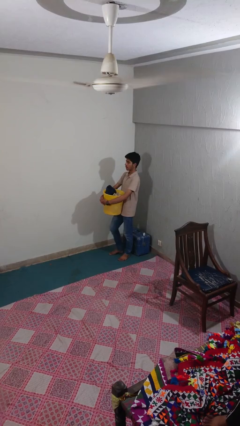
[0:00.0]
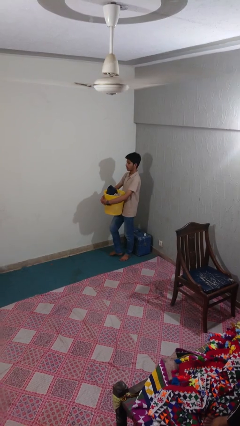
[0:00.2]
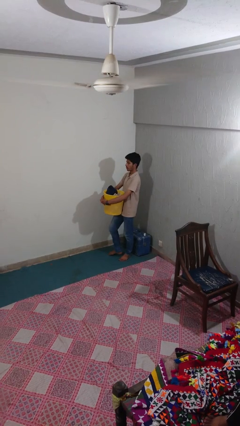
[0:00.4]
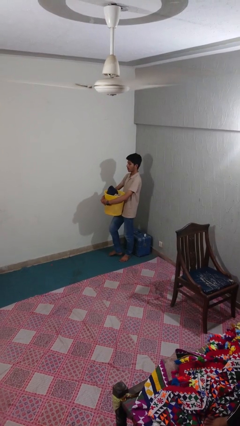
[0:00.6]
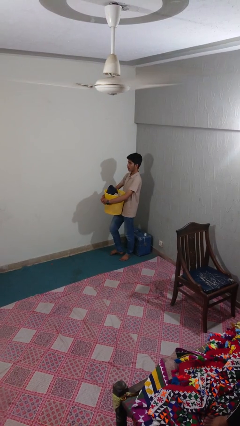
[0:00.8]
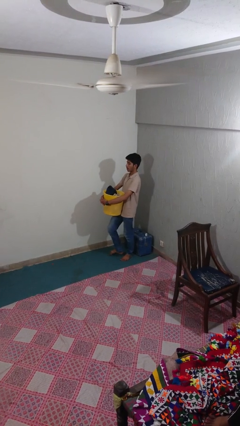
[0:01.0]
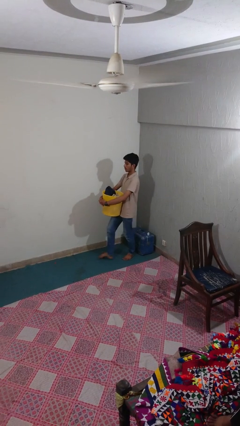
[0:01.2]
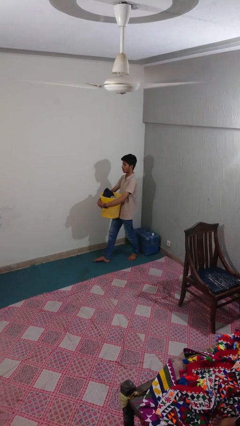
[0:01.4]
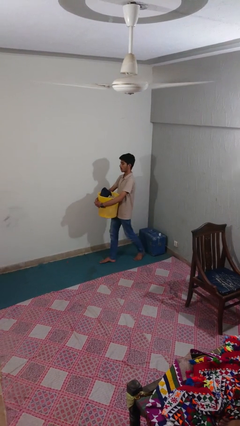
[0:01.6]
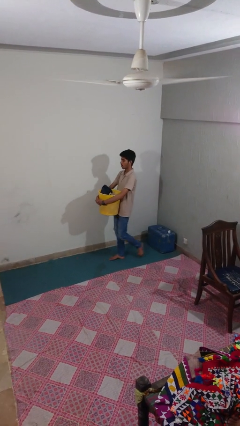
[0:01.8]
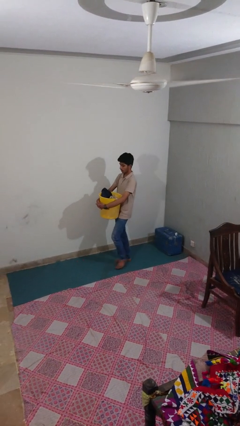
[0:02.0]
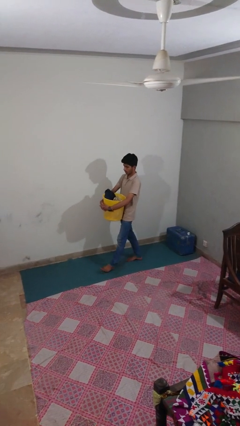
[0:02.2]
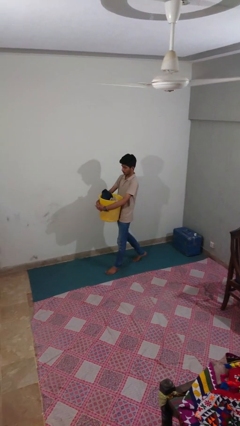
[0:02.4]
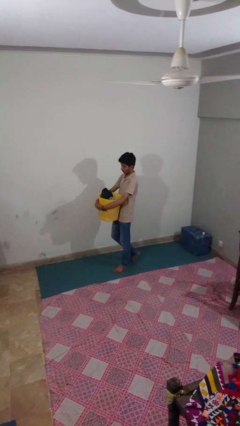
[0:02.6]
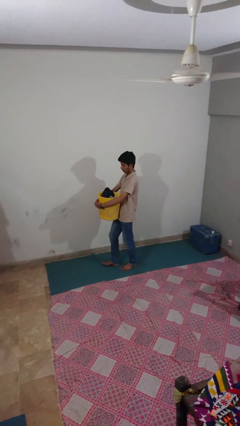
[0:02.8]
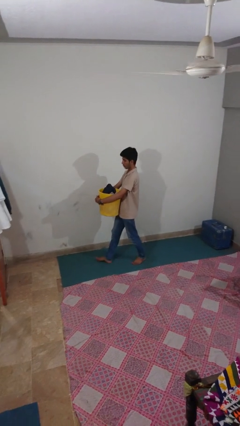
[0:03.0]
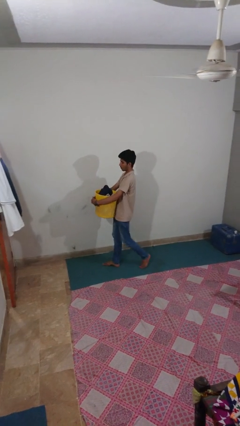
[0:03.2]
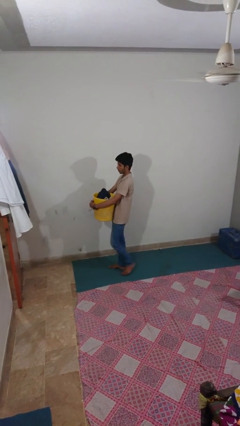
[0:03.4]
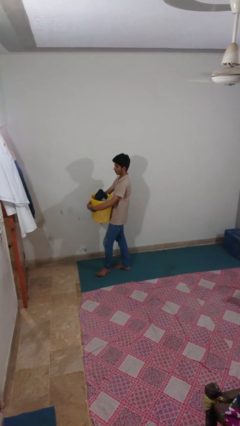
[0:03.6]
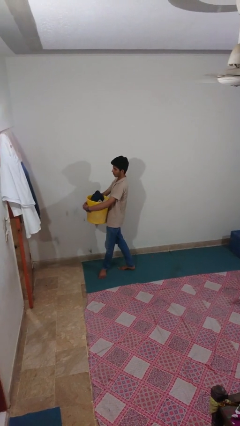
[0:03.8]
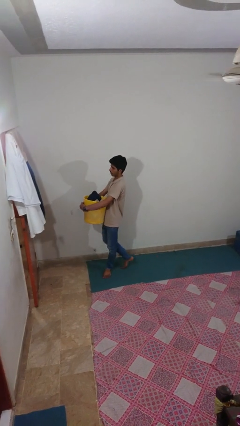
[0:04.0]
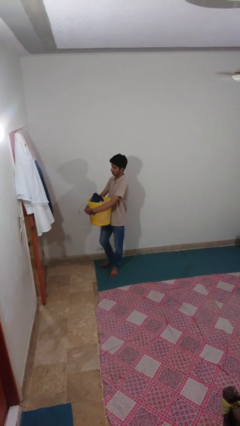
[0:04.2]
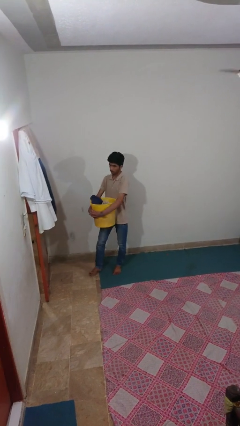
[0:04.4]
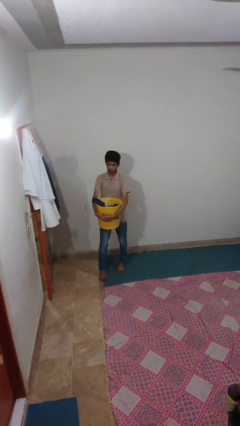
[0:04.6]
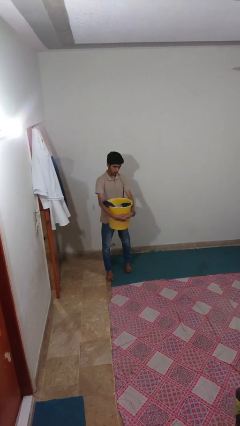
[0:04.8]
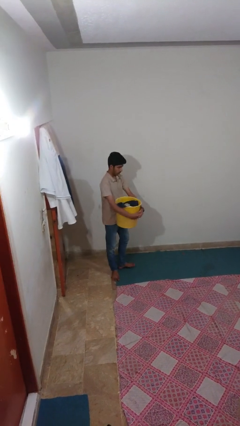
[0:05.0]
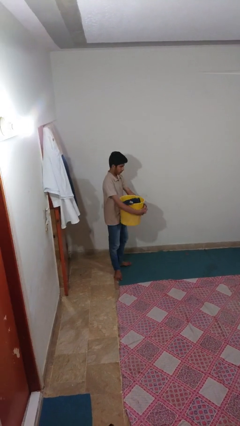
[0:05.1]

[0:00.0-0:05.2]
person carries laundry basket

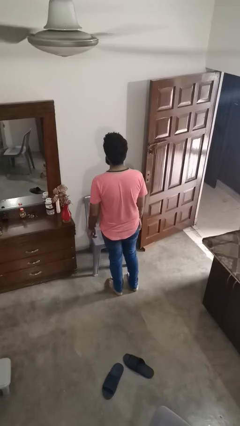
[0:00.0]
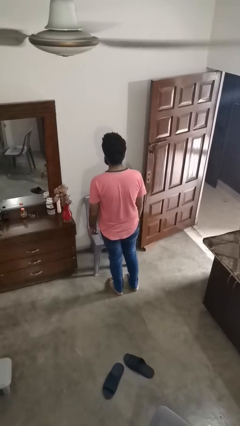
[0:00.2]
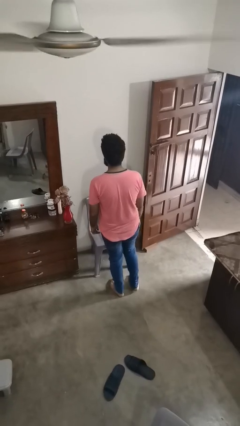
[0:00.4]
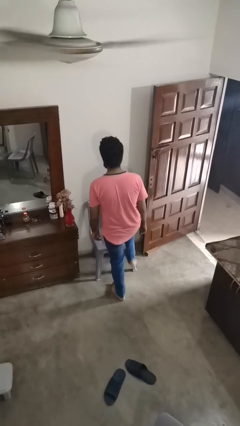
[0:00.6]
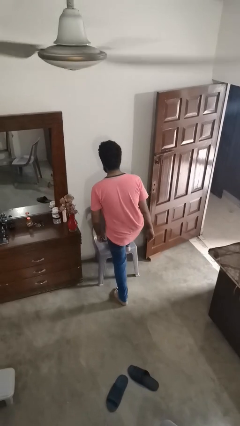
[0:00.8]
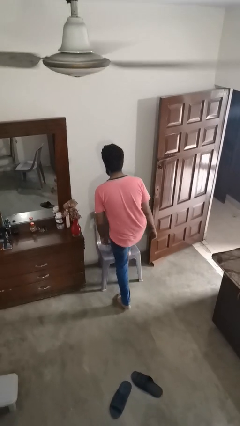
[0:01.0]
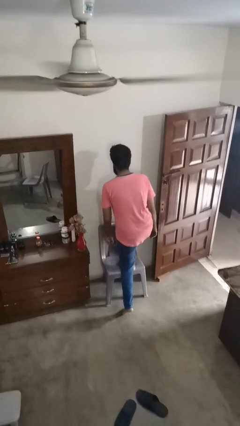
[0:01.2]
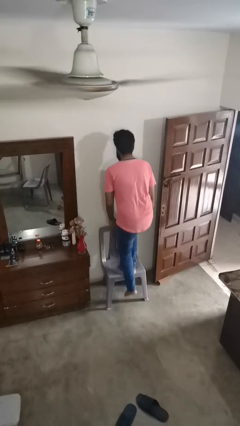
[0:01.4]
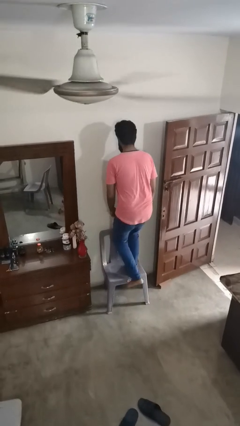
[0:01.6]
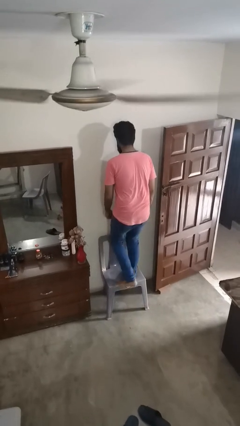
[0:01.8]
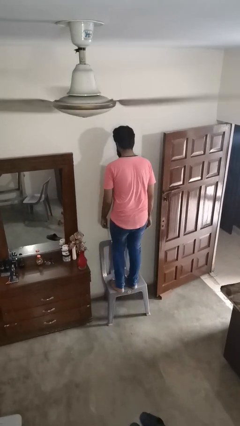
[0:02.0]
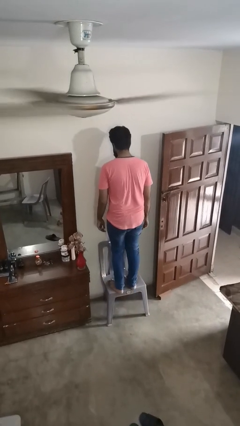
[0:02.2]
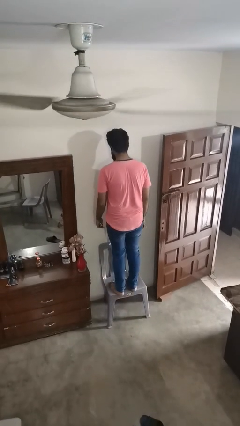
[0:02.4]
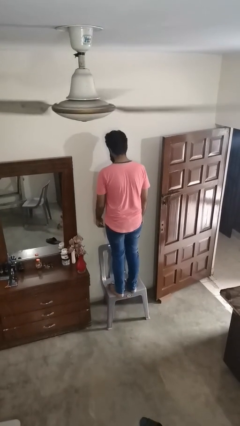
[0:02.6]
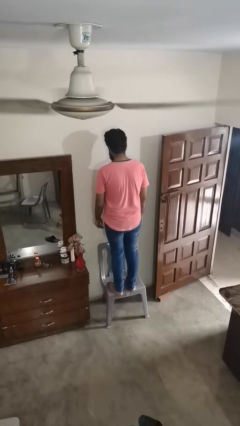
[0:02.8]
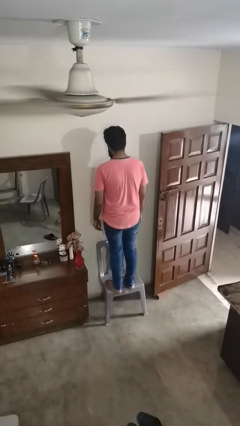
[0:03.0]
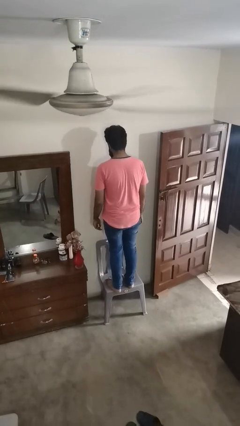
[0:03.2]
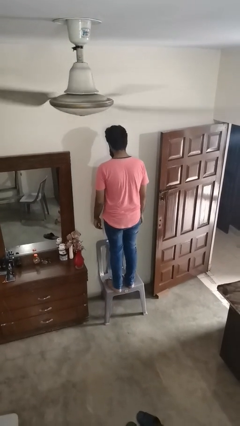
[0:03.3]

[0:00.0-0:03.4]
person climbs on chair

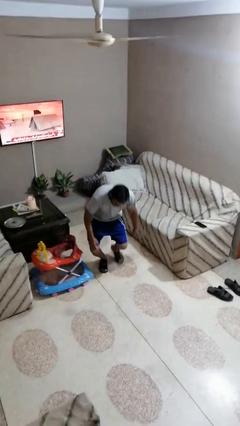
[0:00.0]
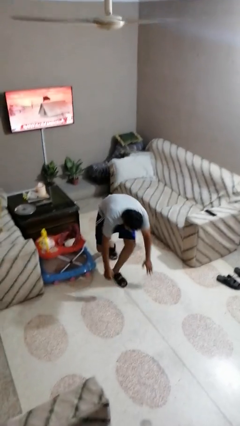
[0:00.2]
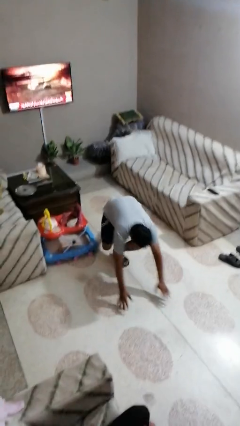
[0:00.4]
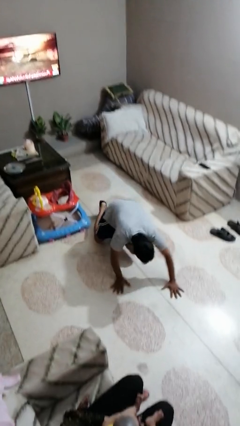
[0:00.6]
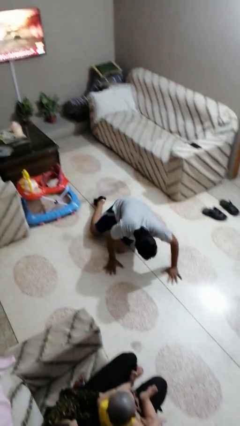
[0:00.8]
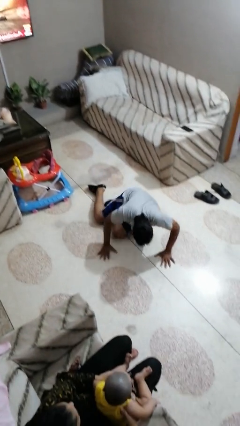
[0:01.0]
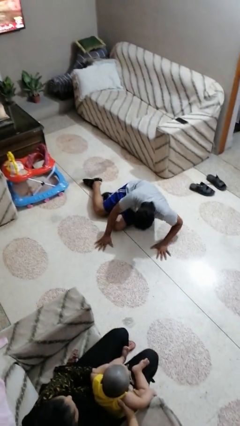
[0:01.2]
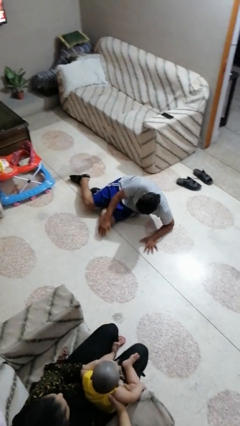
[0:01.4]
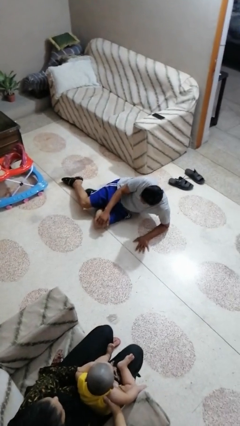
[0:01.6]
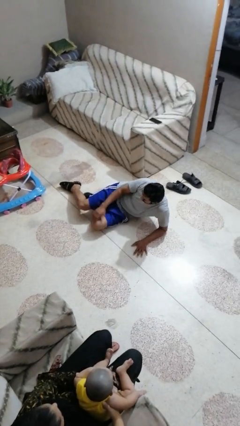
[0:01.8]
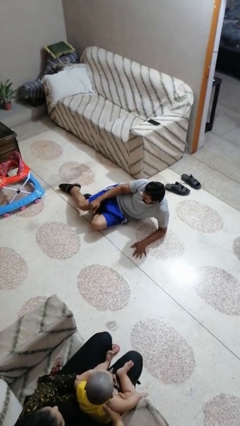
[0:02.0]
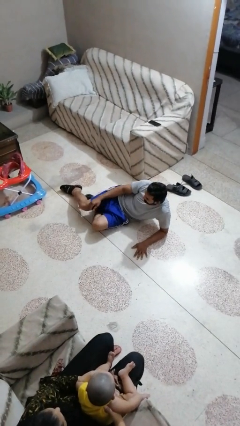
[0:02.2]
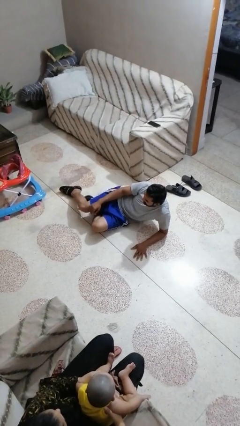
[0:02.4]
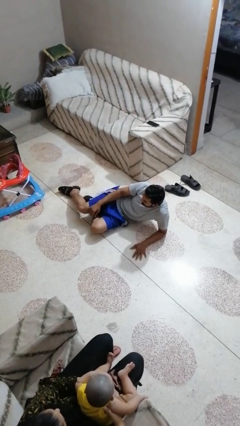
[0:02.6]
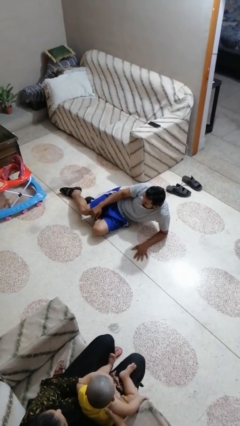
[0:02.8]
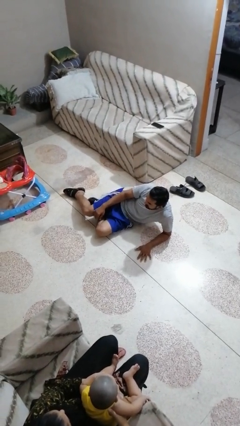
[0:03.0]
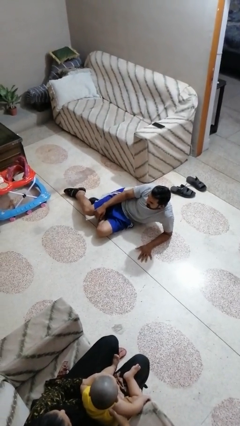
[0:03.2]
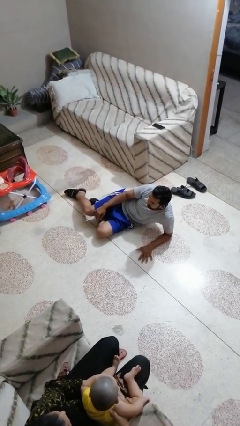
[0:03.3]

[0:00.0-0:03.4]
person lies down on floor

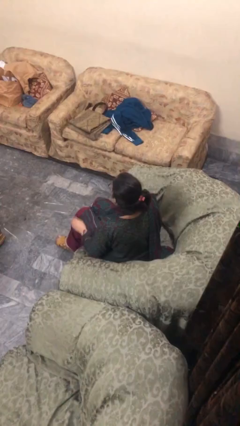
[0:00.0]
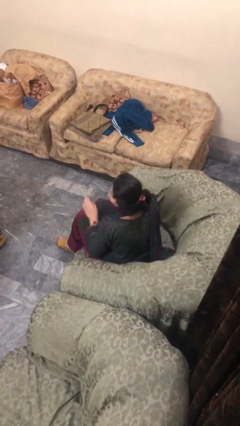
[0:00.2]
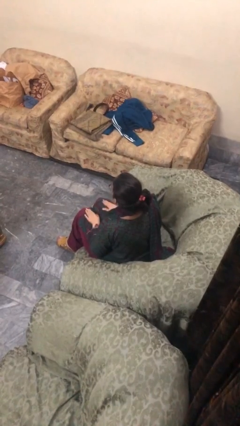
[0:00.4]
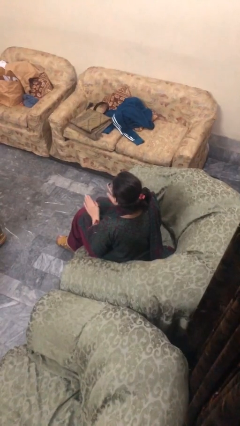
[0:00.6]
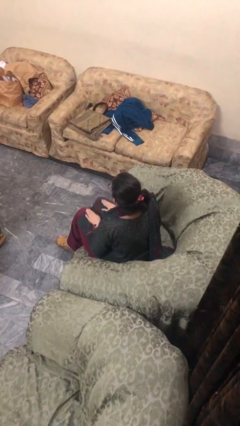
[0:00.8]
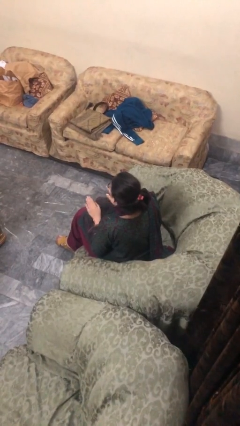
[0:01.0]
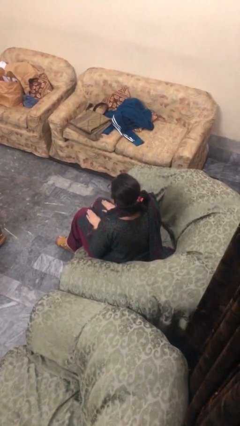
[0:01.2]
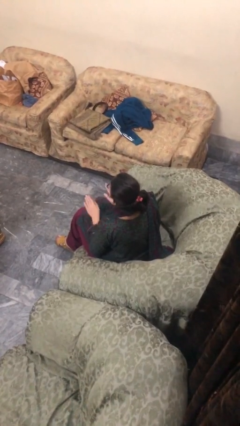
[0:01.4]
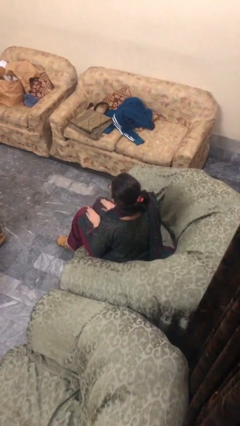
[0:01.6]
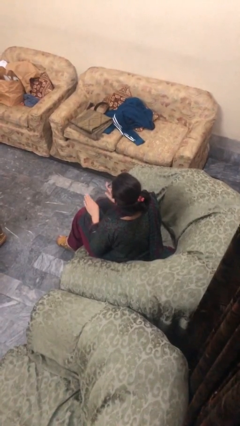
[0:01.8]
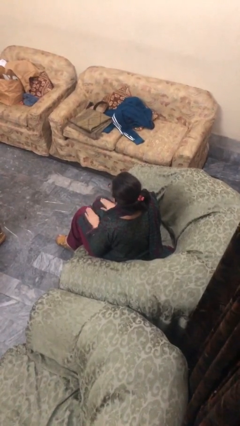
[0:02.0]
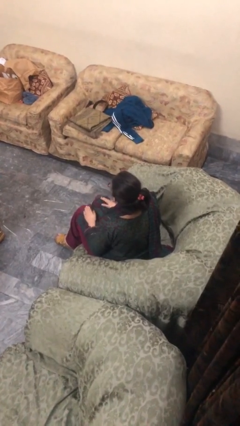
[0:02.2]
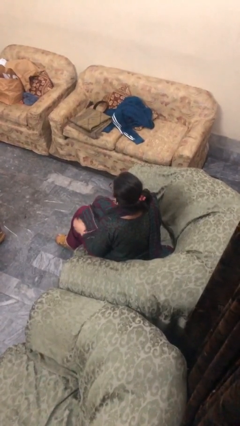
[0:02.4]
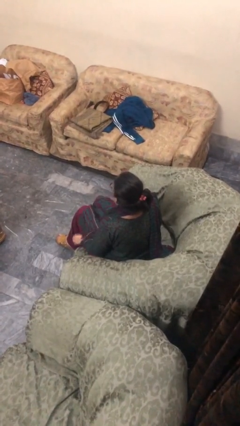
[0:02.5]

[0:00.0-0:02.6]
person slaps hands on thighs

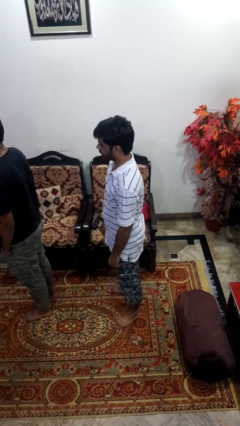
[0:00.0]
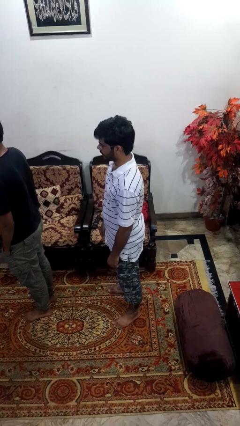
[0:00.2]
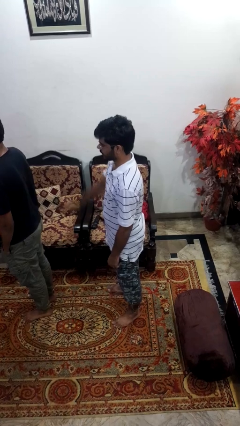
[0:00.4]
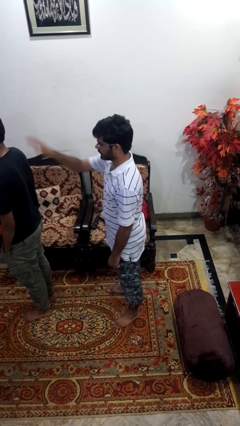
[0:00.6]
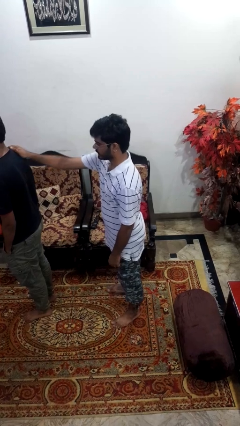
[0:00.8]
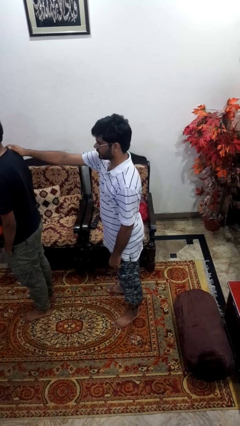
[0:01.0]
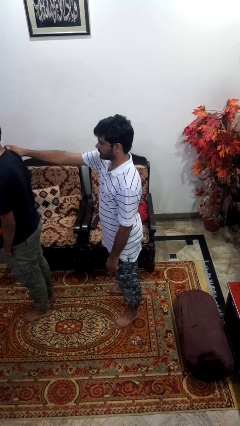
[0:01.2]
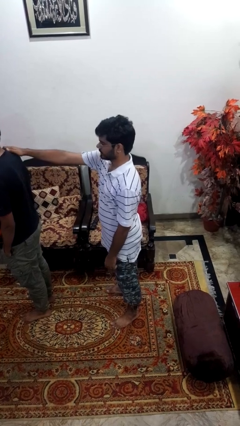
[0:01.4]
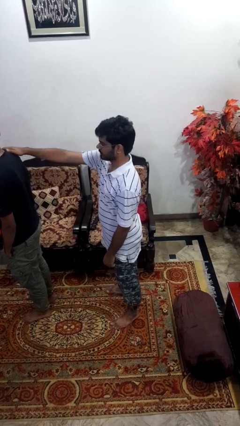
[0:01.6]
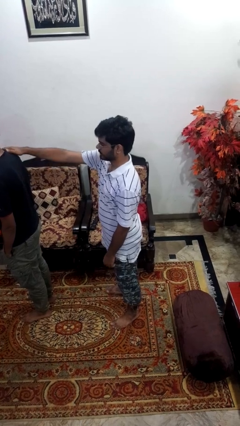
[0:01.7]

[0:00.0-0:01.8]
person grabs person by shoulder

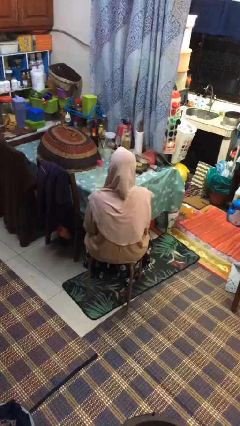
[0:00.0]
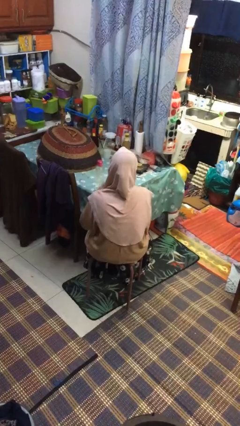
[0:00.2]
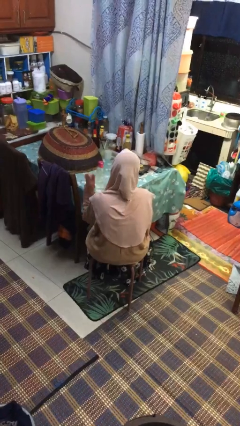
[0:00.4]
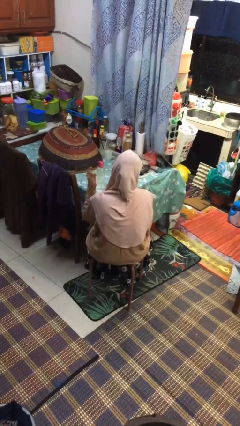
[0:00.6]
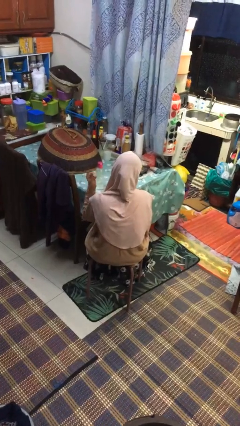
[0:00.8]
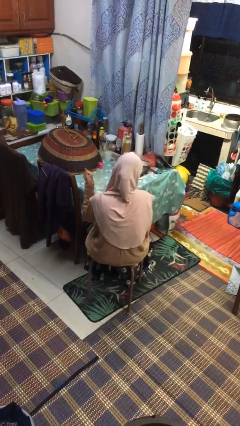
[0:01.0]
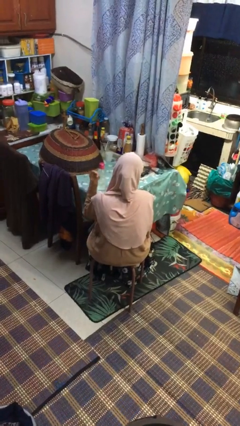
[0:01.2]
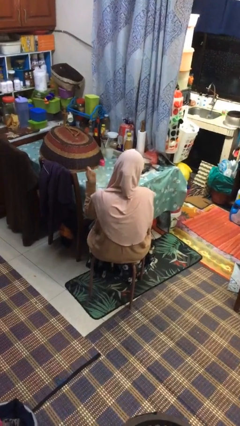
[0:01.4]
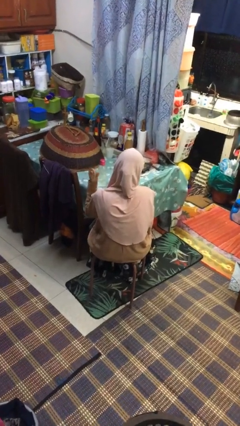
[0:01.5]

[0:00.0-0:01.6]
person snaps fingers
